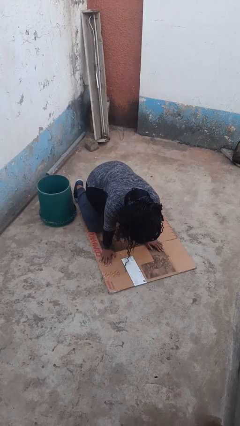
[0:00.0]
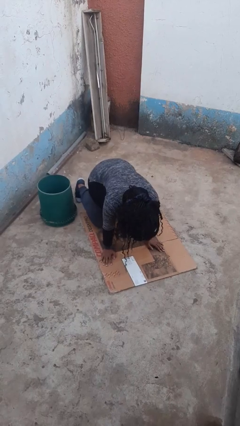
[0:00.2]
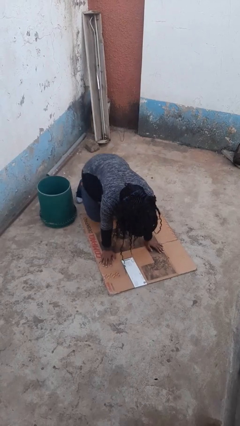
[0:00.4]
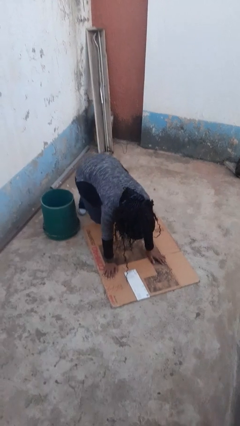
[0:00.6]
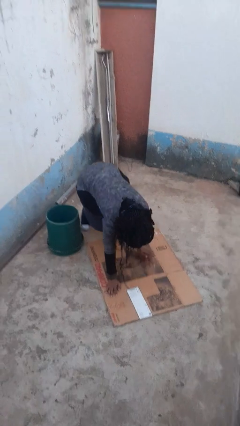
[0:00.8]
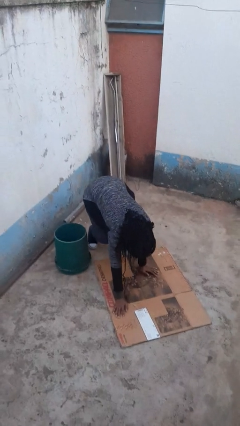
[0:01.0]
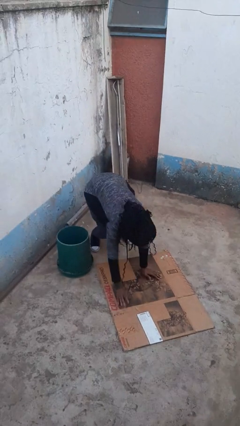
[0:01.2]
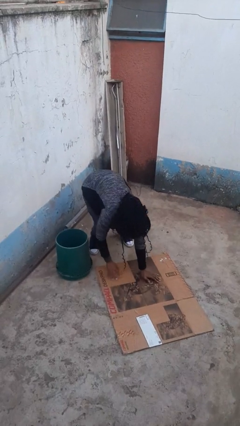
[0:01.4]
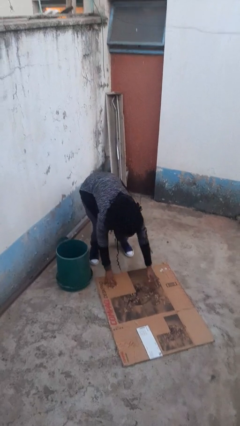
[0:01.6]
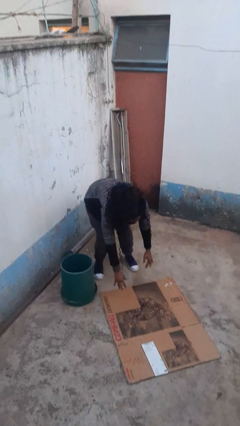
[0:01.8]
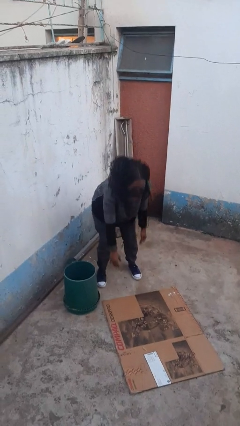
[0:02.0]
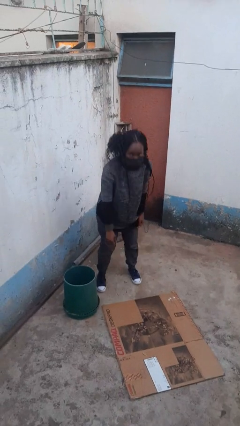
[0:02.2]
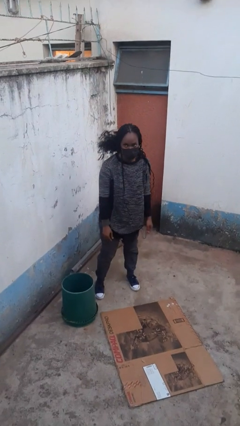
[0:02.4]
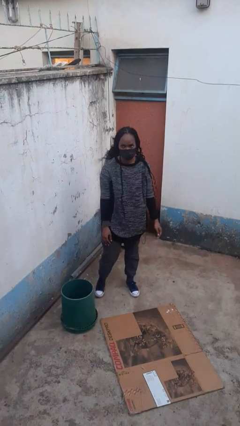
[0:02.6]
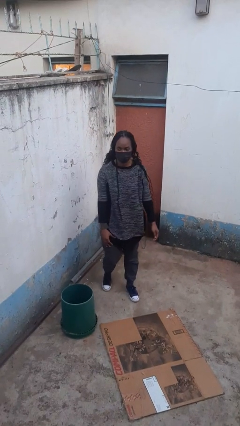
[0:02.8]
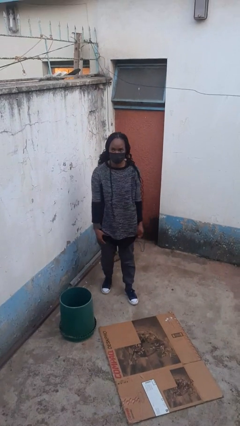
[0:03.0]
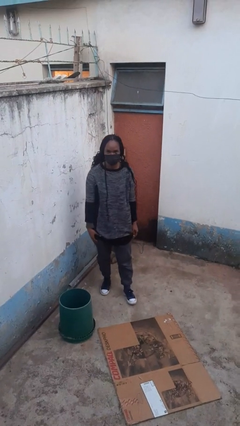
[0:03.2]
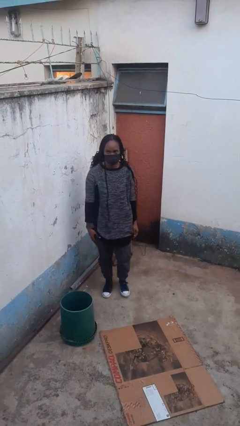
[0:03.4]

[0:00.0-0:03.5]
person stands up from floor

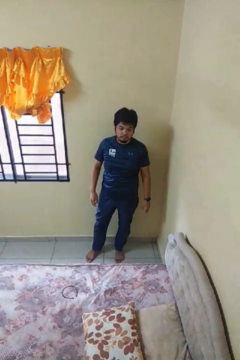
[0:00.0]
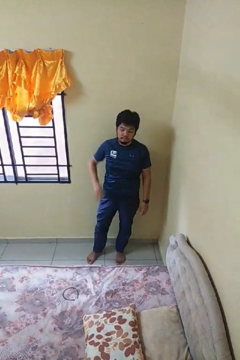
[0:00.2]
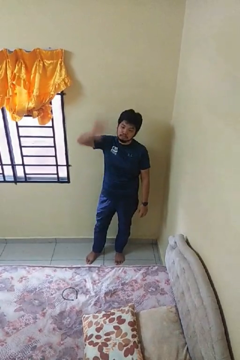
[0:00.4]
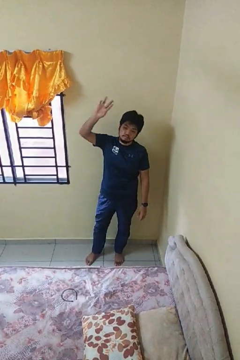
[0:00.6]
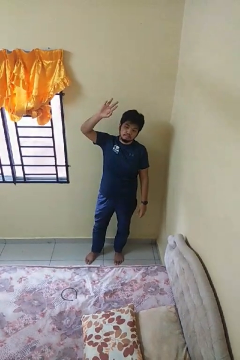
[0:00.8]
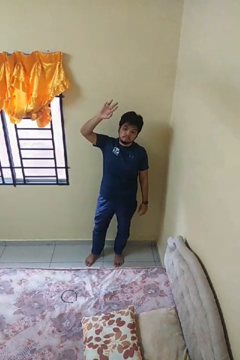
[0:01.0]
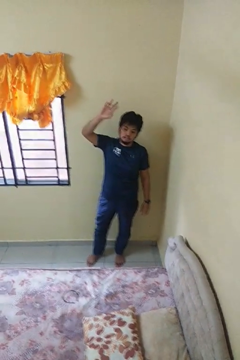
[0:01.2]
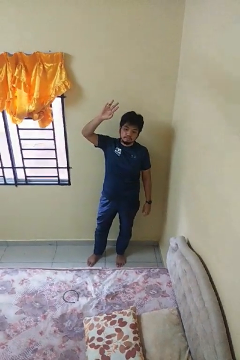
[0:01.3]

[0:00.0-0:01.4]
person gestures swipe up

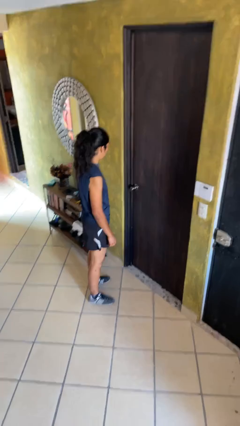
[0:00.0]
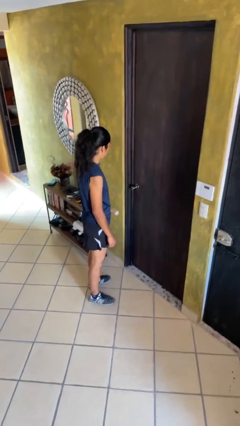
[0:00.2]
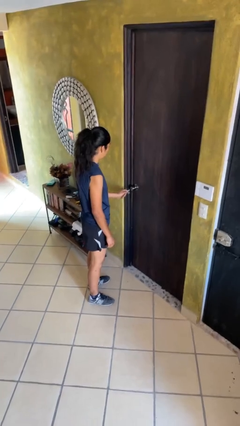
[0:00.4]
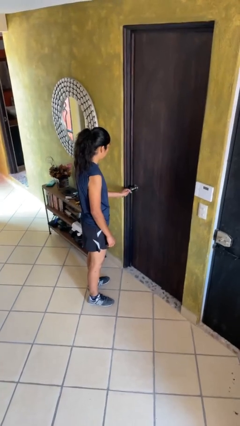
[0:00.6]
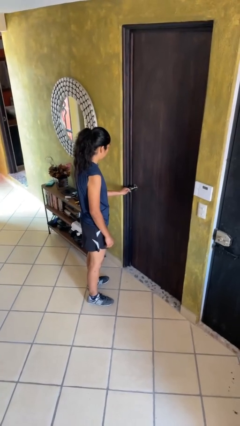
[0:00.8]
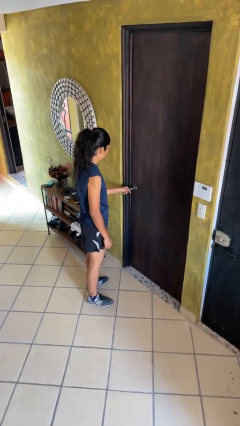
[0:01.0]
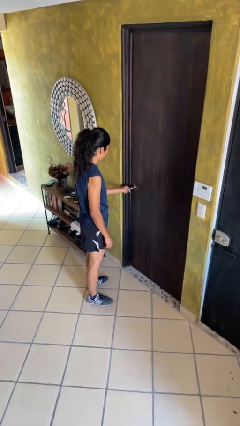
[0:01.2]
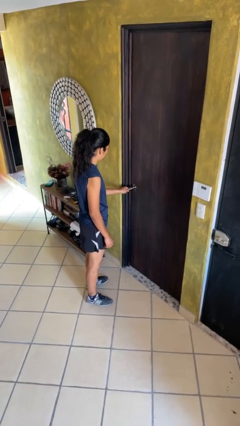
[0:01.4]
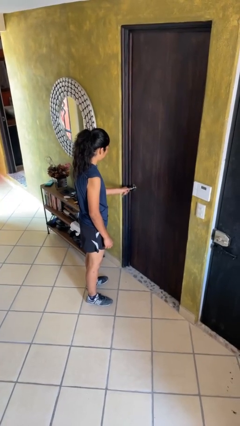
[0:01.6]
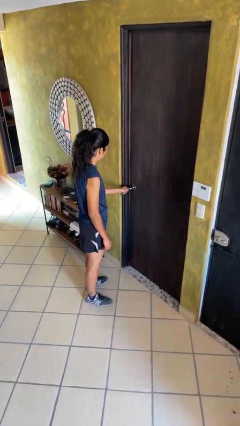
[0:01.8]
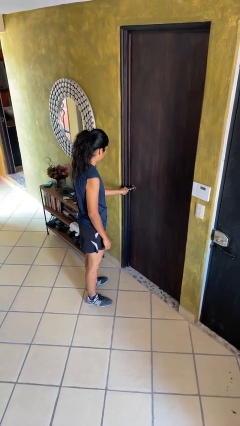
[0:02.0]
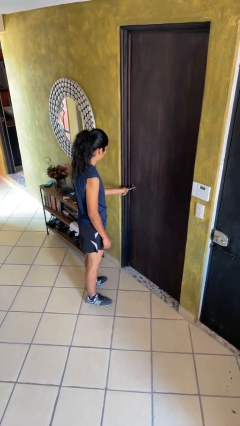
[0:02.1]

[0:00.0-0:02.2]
person unlocks door with keys

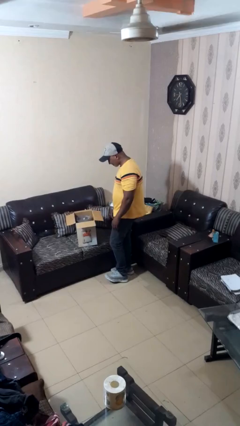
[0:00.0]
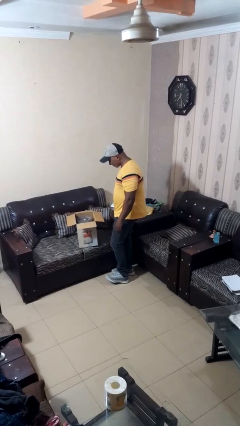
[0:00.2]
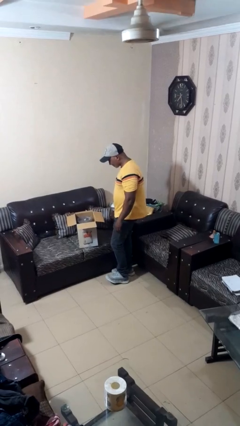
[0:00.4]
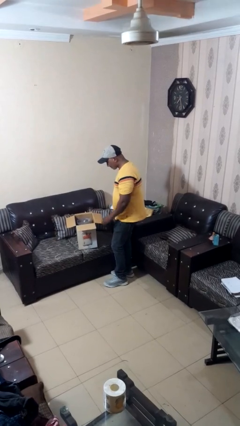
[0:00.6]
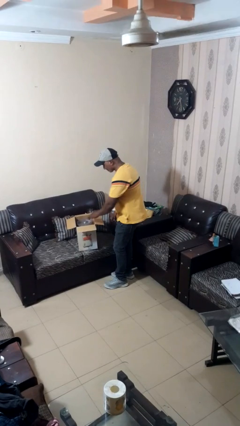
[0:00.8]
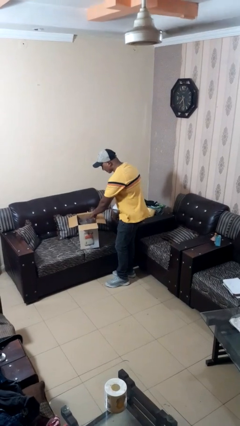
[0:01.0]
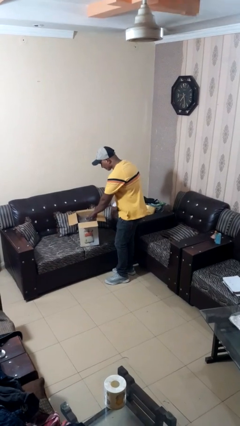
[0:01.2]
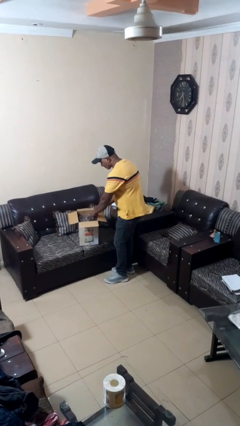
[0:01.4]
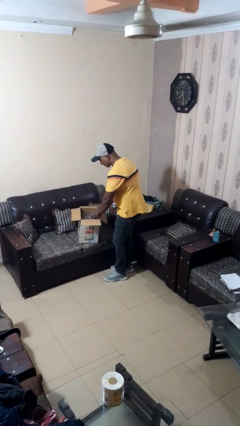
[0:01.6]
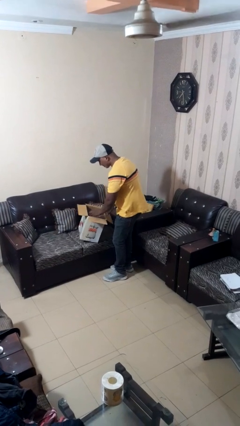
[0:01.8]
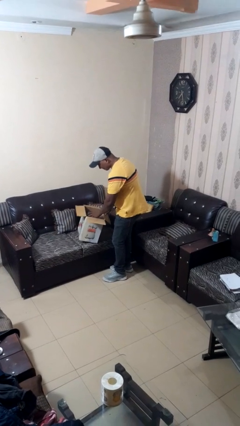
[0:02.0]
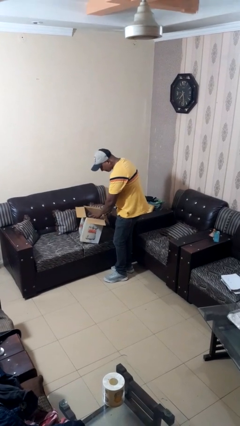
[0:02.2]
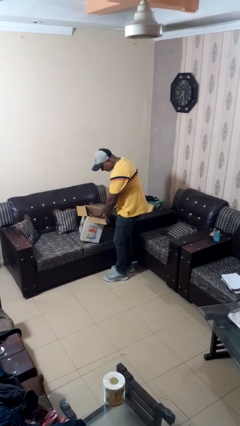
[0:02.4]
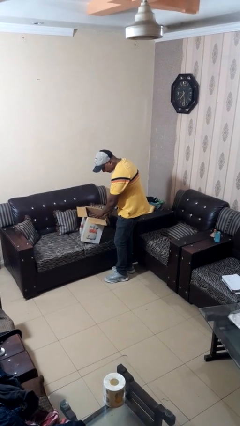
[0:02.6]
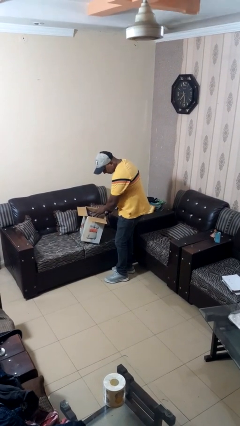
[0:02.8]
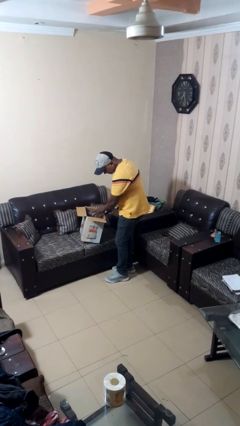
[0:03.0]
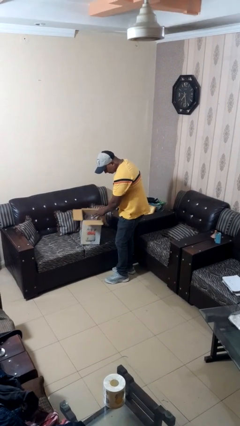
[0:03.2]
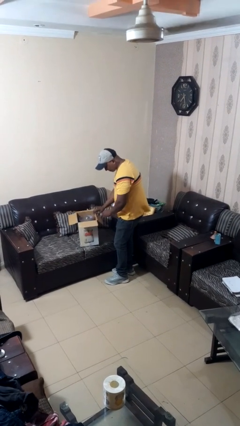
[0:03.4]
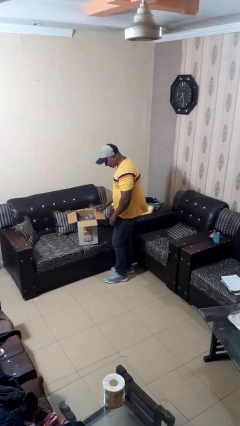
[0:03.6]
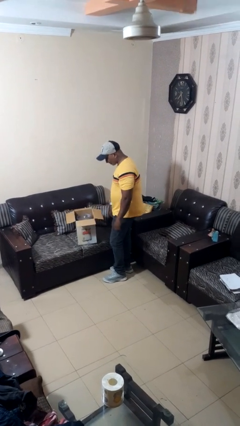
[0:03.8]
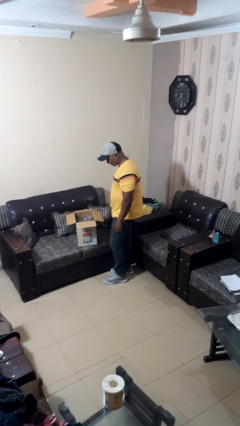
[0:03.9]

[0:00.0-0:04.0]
person searches in box

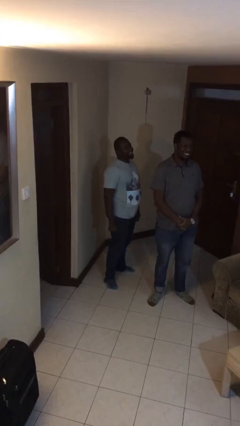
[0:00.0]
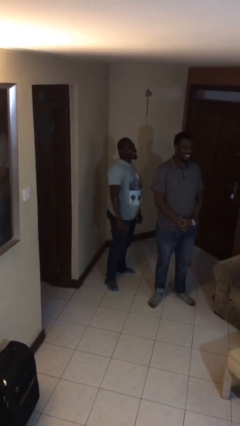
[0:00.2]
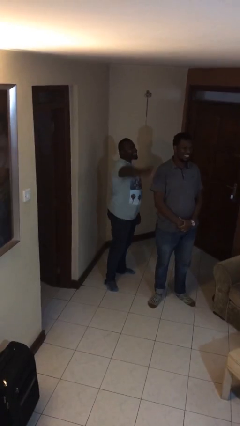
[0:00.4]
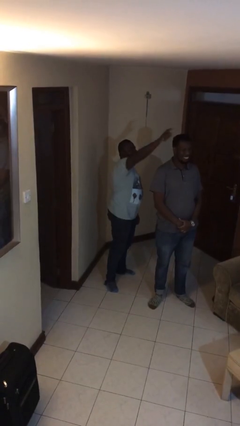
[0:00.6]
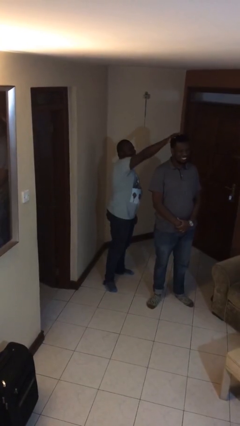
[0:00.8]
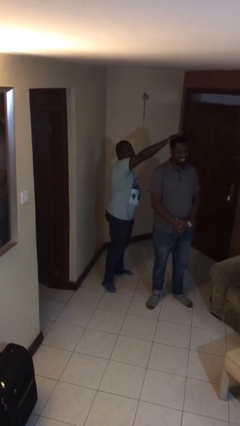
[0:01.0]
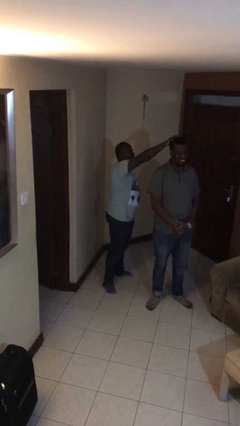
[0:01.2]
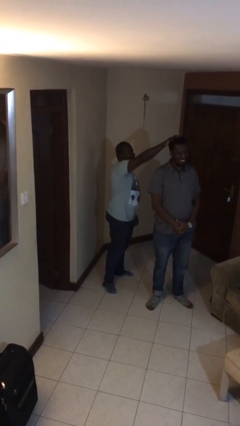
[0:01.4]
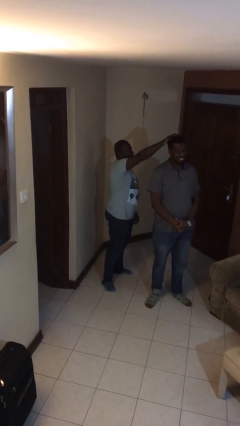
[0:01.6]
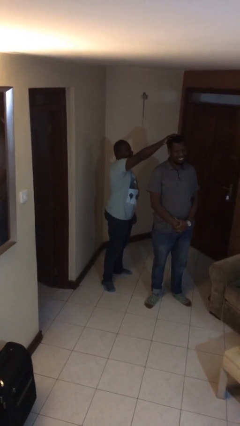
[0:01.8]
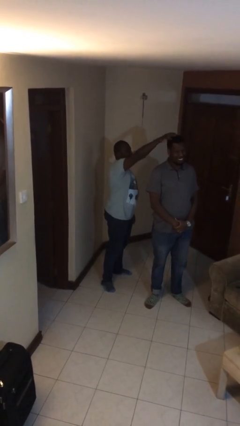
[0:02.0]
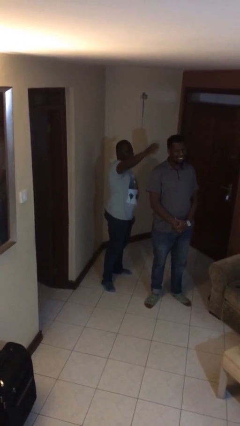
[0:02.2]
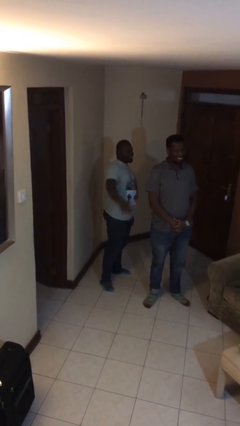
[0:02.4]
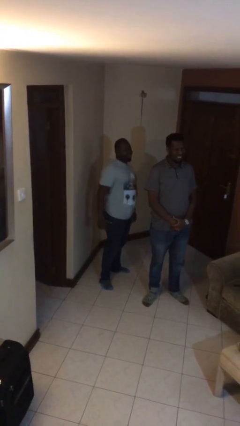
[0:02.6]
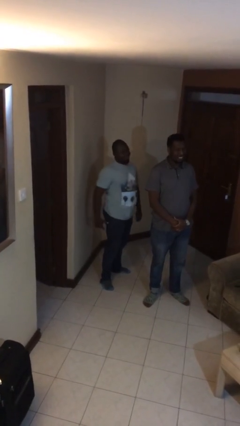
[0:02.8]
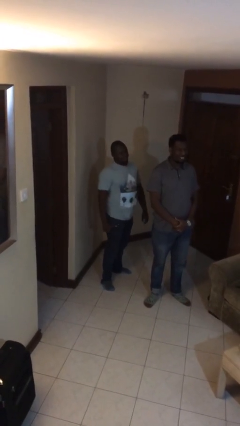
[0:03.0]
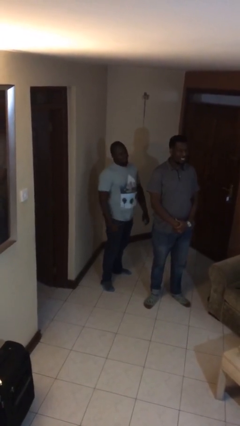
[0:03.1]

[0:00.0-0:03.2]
person grabs person by hair

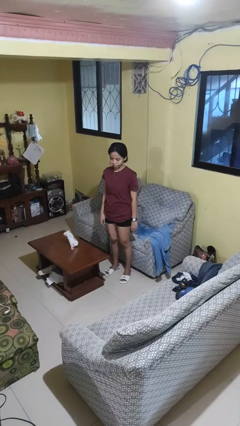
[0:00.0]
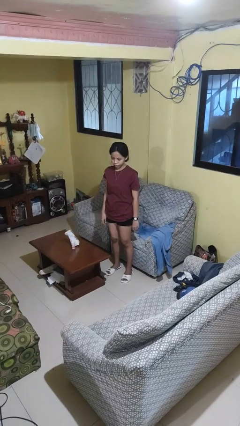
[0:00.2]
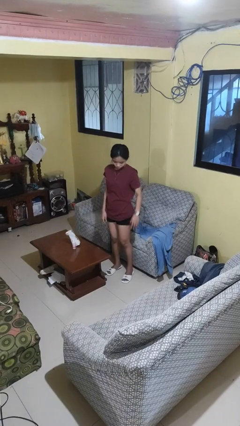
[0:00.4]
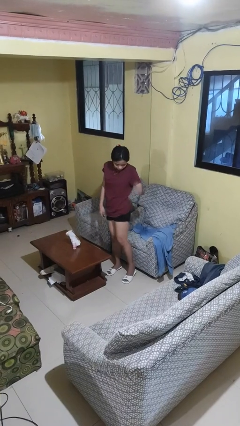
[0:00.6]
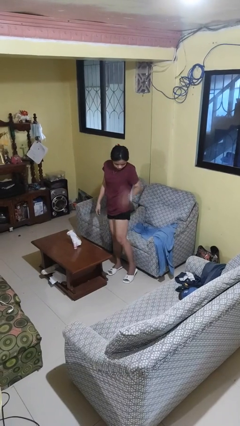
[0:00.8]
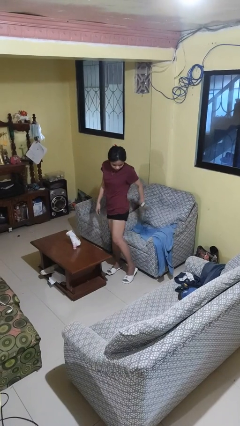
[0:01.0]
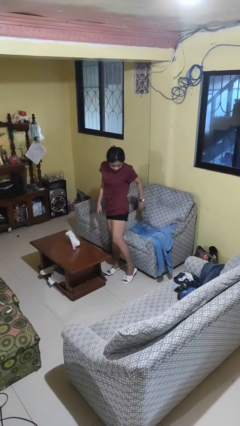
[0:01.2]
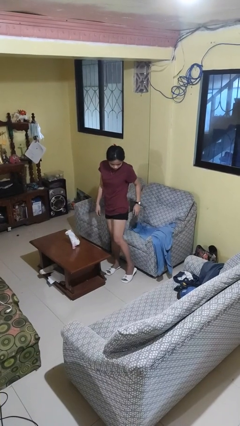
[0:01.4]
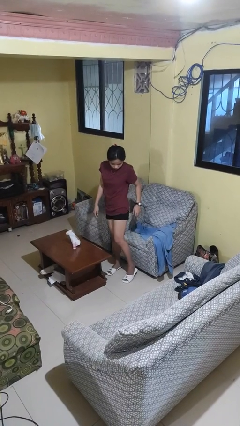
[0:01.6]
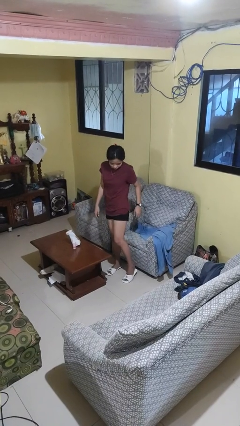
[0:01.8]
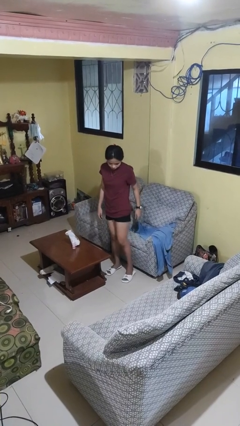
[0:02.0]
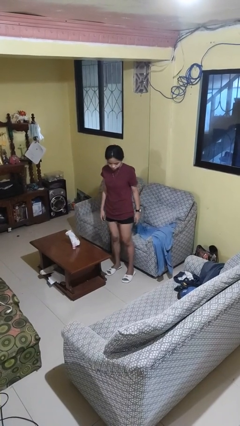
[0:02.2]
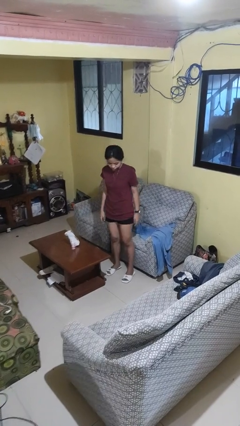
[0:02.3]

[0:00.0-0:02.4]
person swats bug

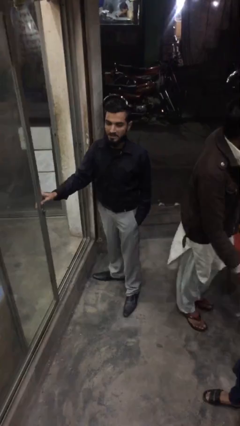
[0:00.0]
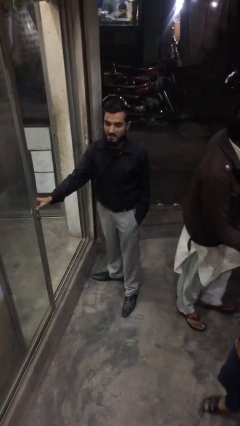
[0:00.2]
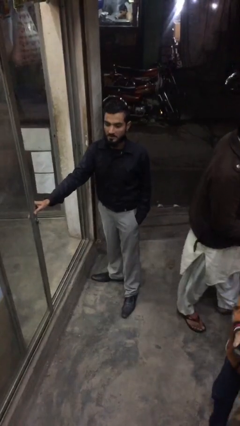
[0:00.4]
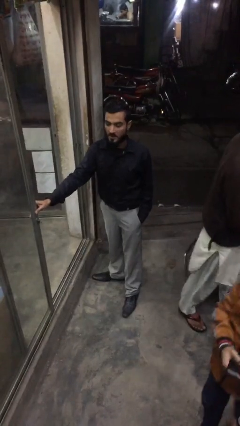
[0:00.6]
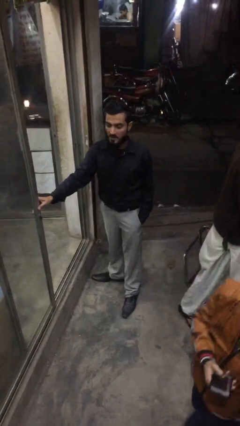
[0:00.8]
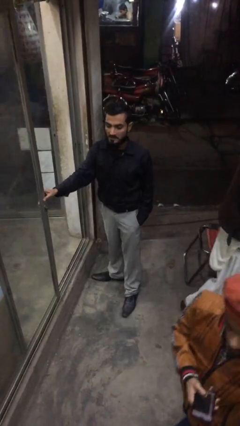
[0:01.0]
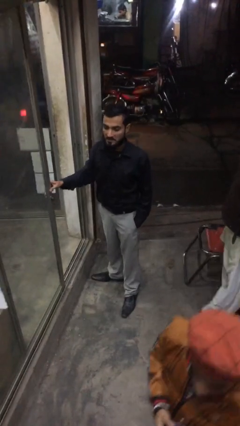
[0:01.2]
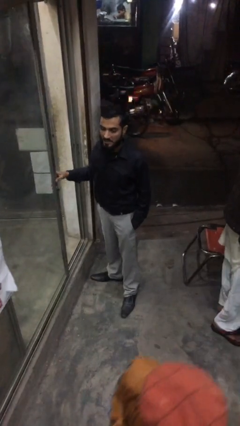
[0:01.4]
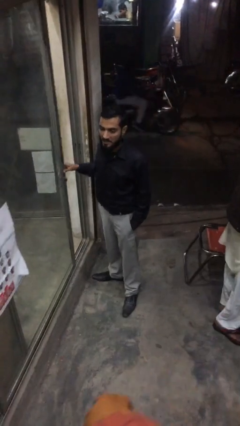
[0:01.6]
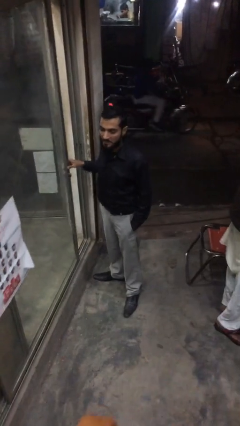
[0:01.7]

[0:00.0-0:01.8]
person closes facility door
